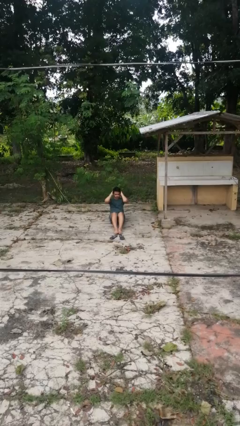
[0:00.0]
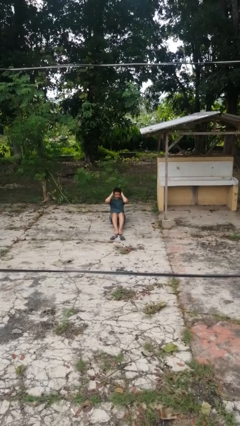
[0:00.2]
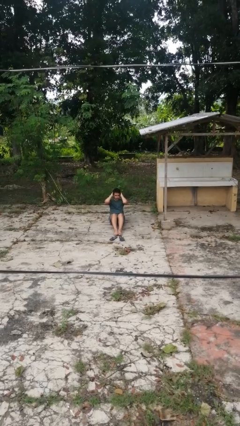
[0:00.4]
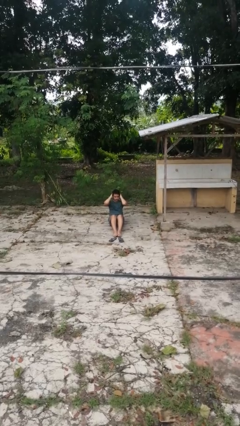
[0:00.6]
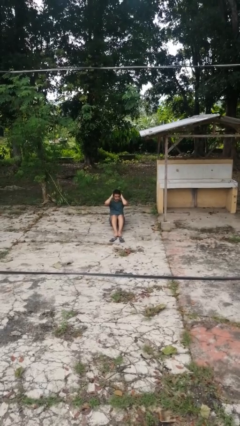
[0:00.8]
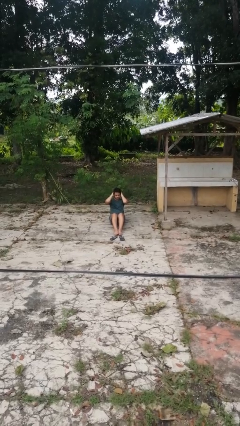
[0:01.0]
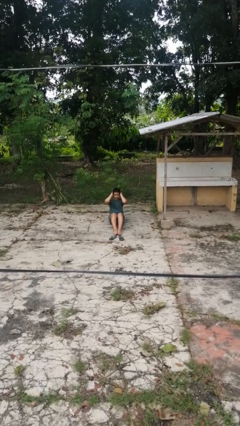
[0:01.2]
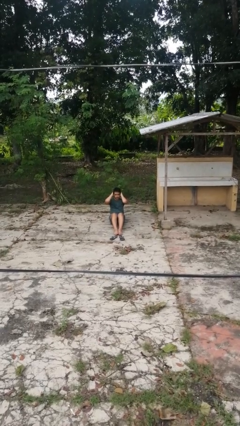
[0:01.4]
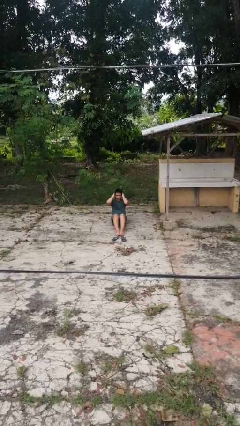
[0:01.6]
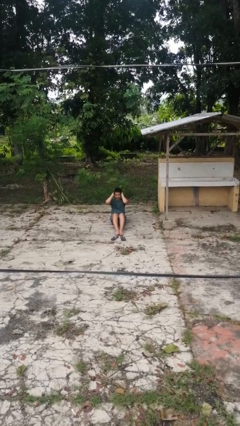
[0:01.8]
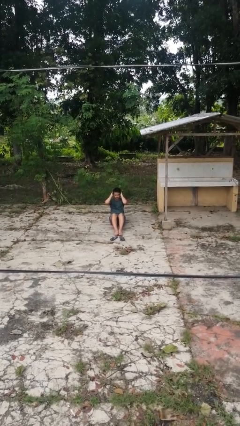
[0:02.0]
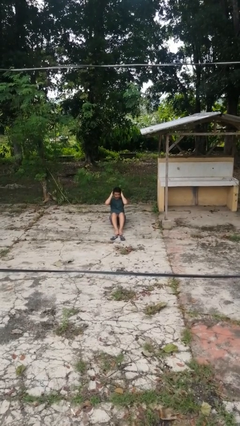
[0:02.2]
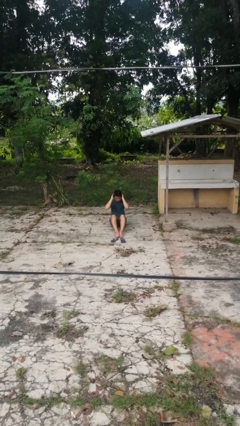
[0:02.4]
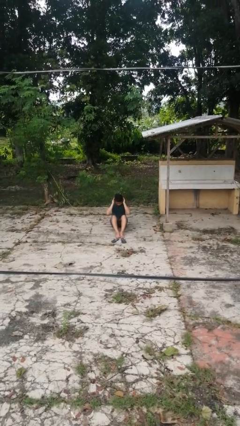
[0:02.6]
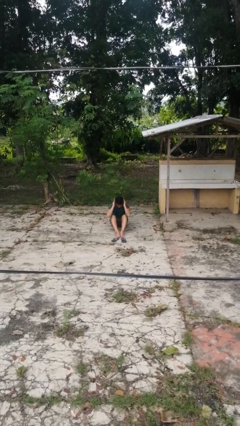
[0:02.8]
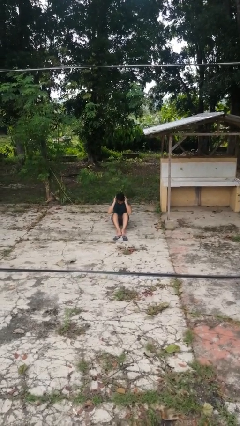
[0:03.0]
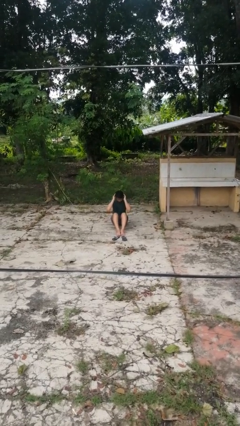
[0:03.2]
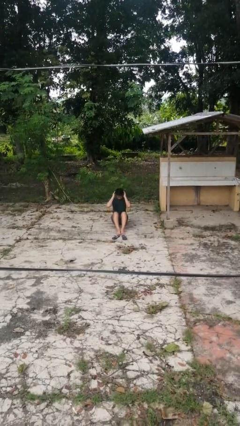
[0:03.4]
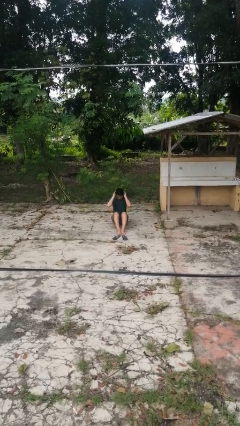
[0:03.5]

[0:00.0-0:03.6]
person exercises with situp

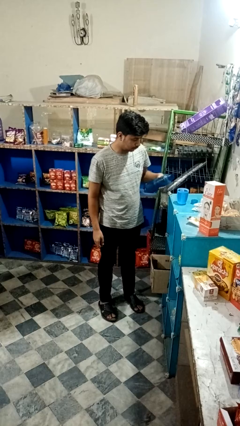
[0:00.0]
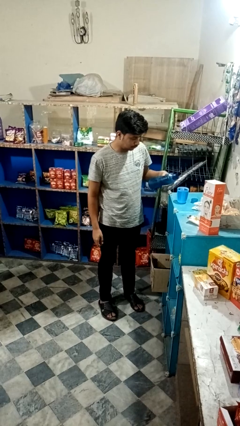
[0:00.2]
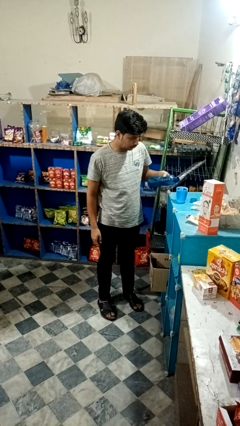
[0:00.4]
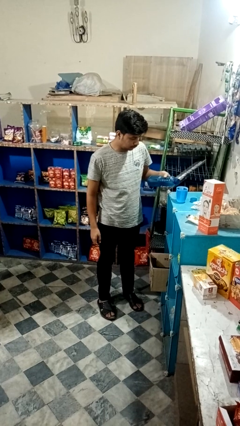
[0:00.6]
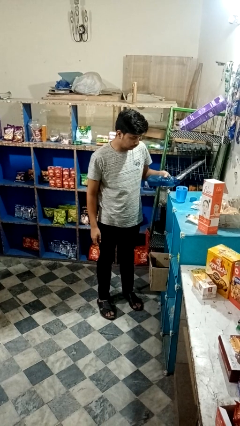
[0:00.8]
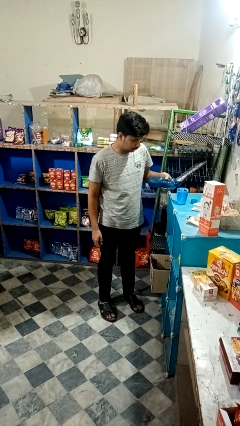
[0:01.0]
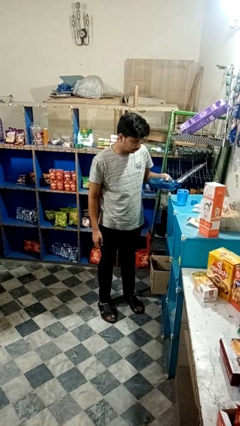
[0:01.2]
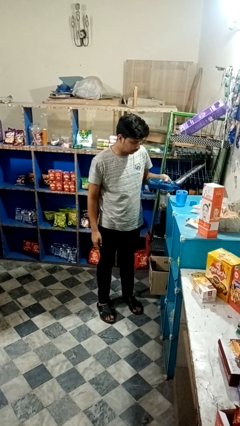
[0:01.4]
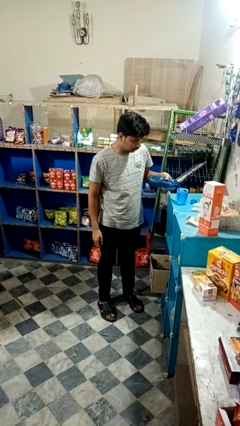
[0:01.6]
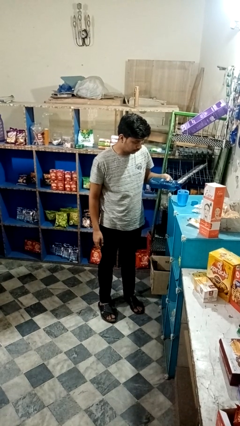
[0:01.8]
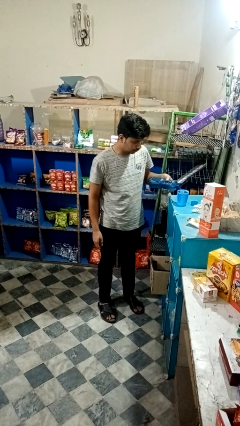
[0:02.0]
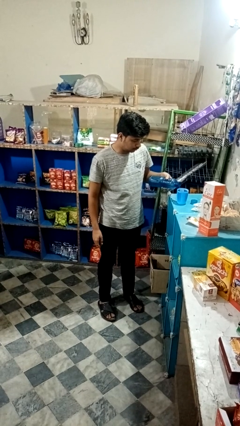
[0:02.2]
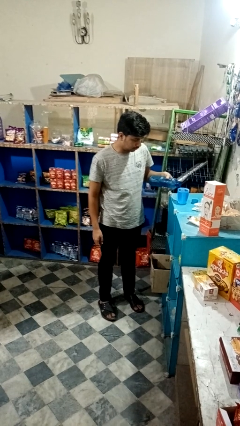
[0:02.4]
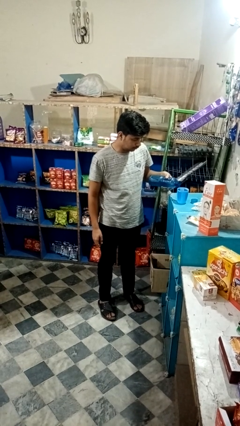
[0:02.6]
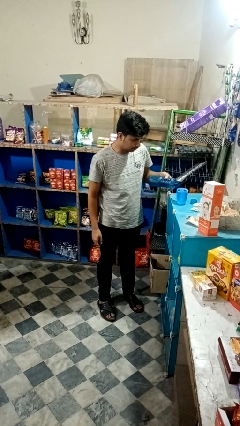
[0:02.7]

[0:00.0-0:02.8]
person pours liquid into cup

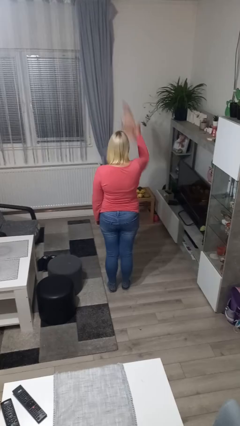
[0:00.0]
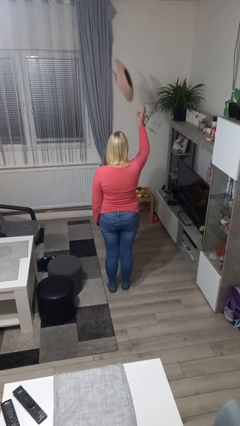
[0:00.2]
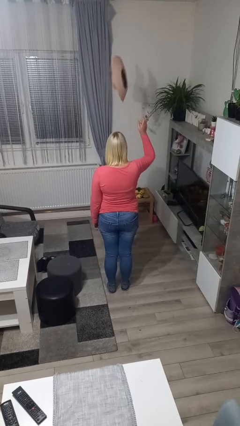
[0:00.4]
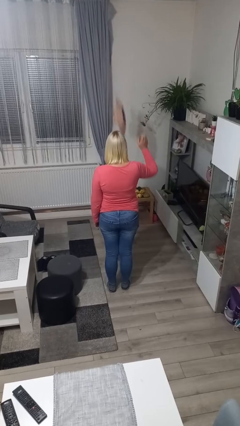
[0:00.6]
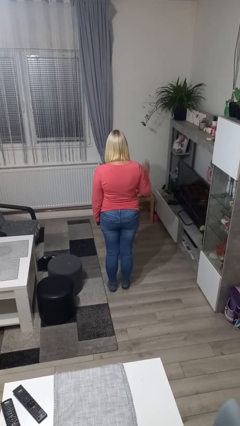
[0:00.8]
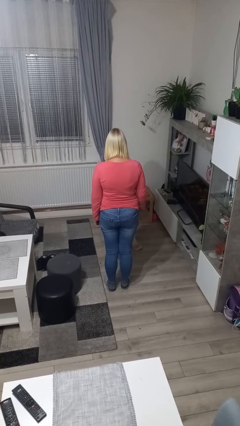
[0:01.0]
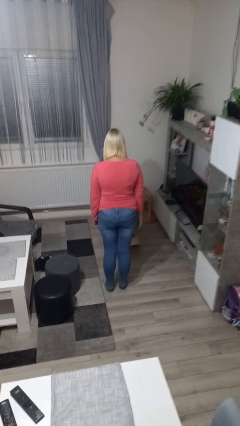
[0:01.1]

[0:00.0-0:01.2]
person throws object into air

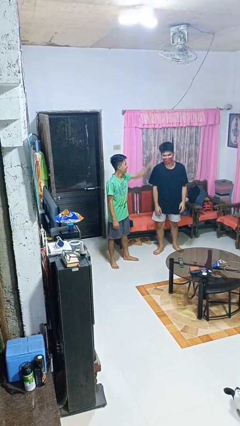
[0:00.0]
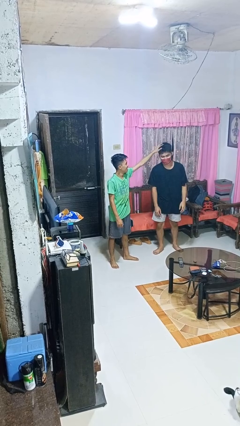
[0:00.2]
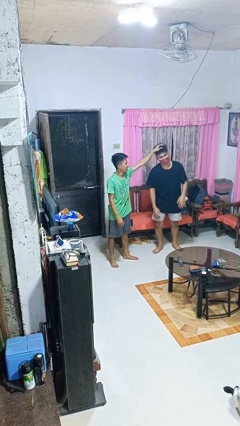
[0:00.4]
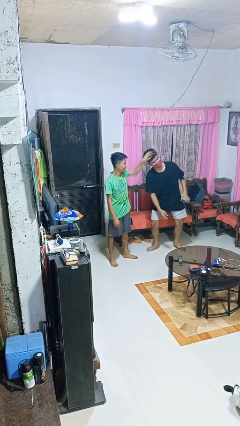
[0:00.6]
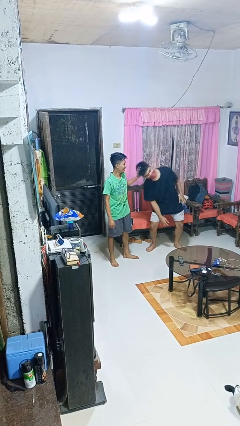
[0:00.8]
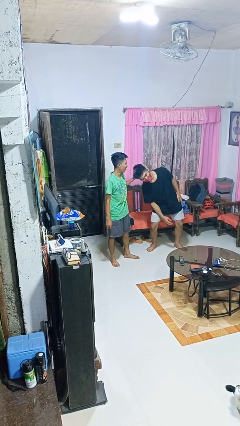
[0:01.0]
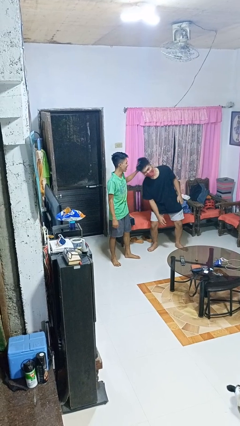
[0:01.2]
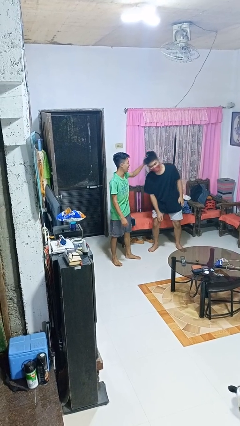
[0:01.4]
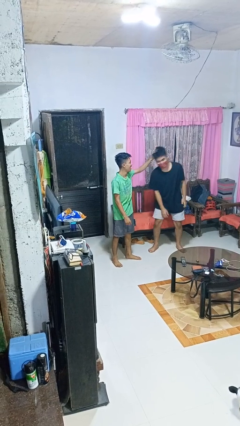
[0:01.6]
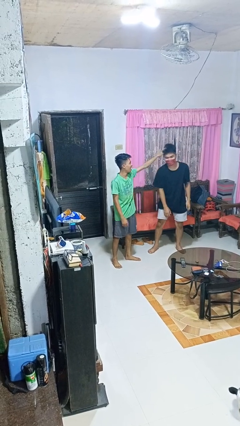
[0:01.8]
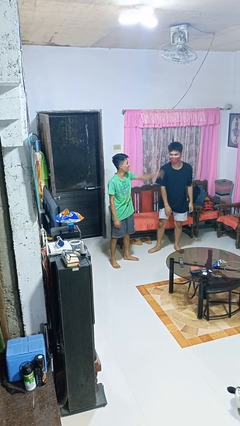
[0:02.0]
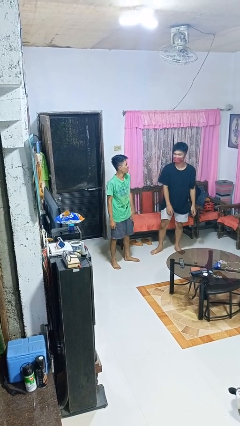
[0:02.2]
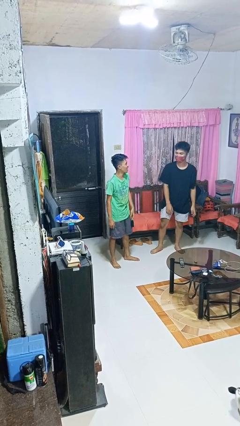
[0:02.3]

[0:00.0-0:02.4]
person grabs person by hair

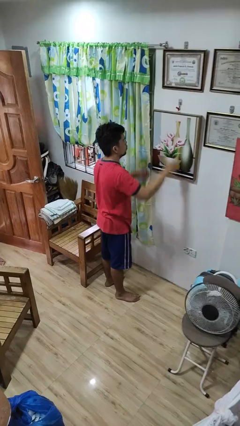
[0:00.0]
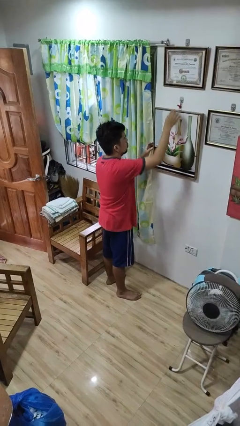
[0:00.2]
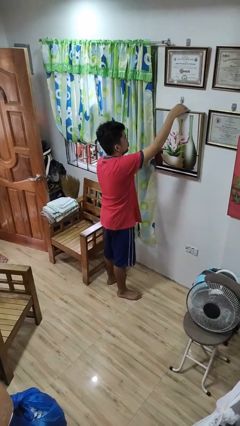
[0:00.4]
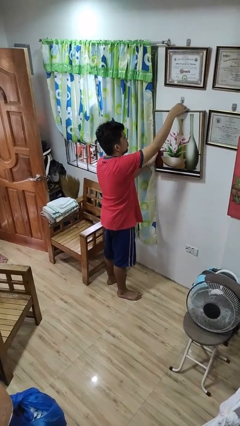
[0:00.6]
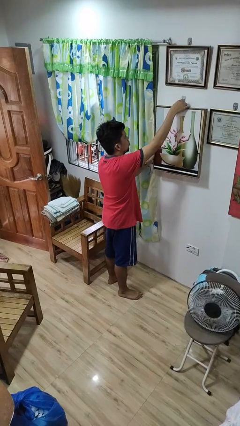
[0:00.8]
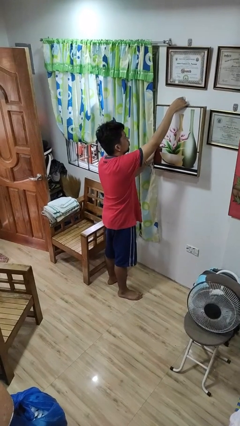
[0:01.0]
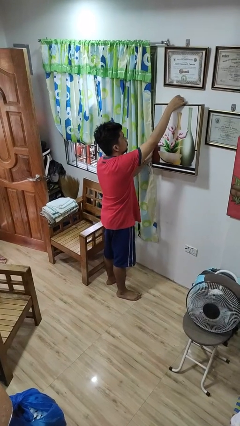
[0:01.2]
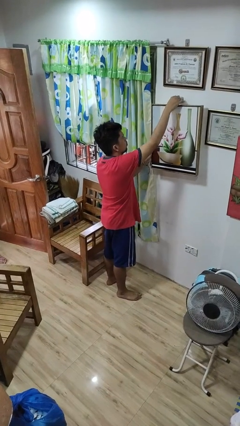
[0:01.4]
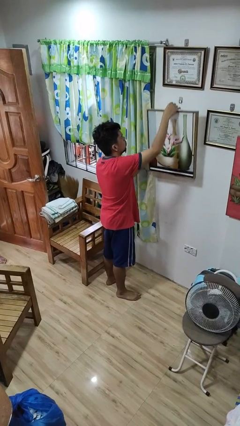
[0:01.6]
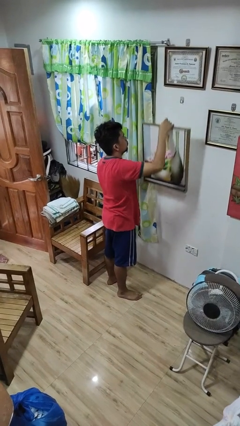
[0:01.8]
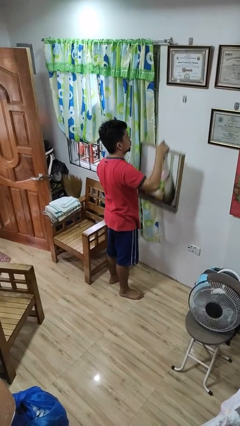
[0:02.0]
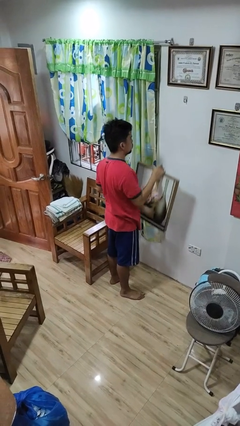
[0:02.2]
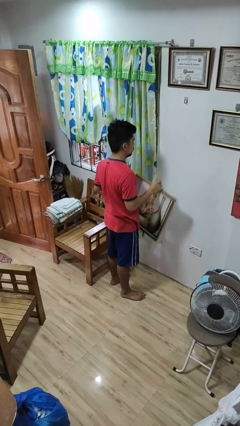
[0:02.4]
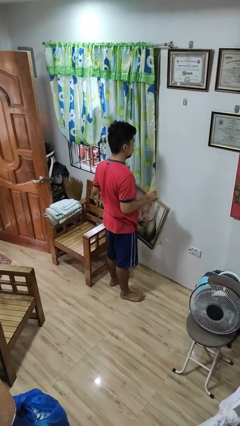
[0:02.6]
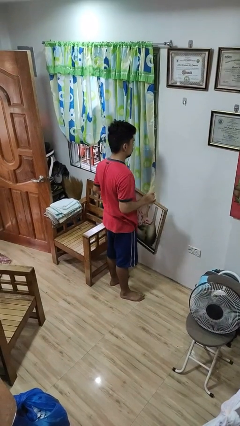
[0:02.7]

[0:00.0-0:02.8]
person takes down picture frame

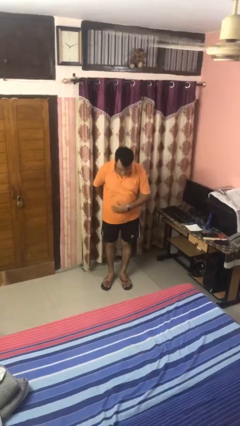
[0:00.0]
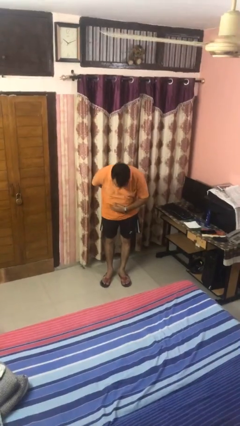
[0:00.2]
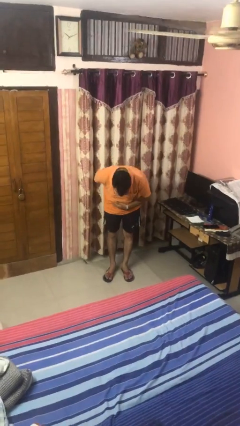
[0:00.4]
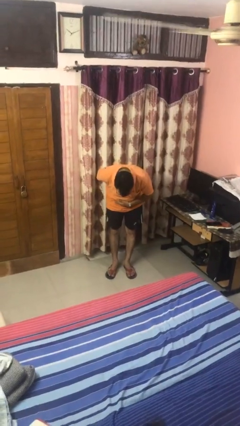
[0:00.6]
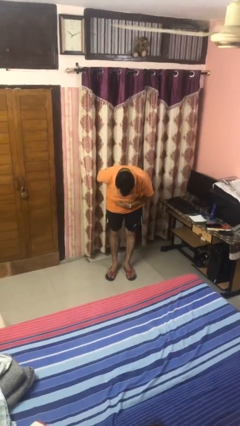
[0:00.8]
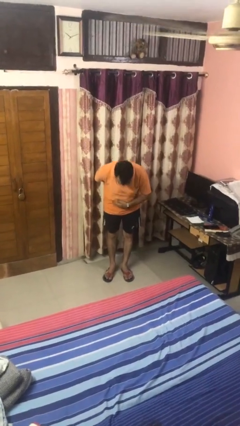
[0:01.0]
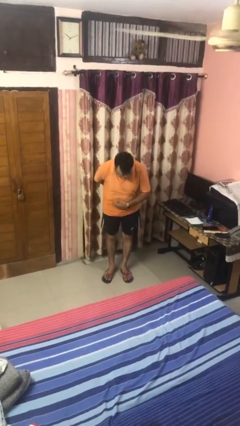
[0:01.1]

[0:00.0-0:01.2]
person bows

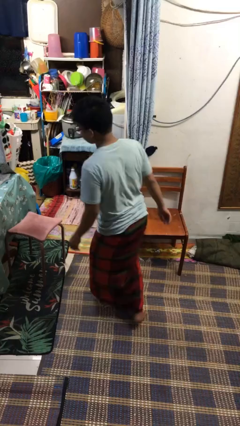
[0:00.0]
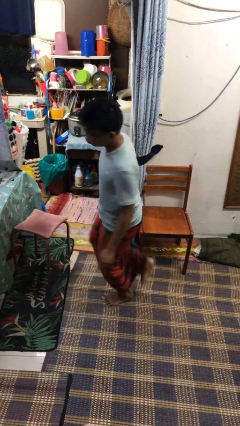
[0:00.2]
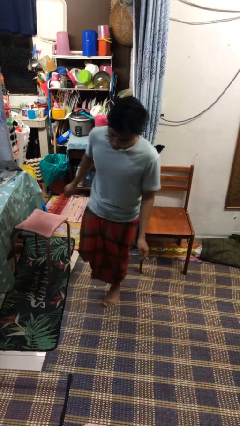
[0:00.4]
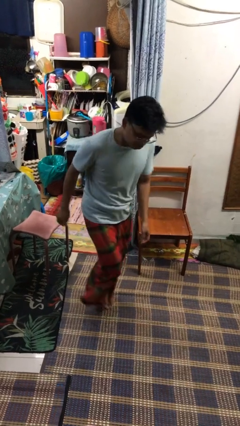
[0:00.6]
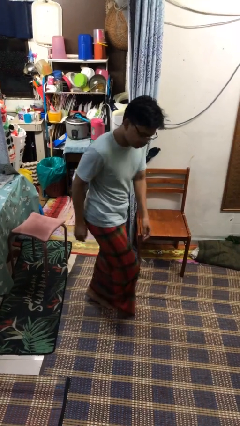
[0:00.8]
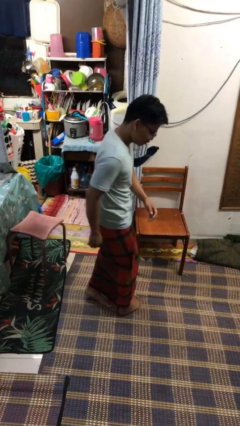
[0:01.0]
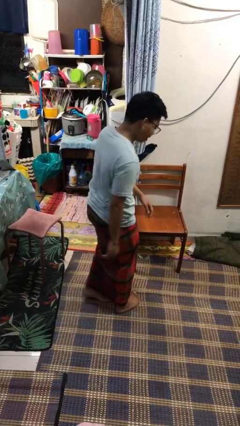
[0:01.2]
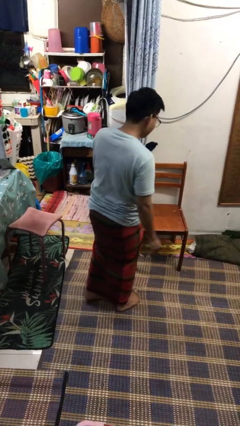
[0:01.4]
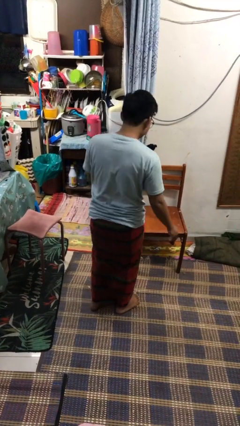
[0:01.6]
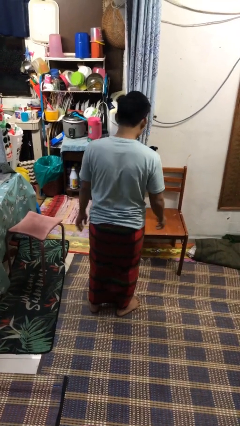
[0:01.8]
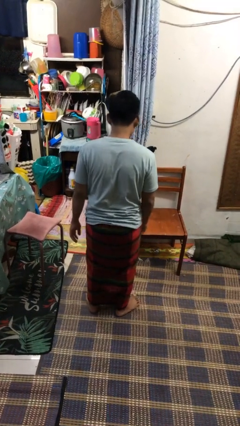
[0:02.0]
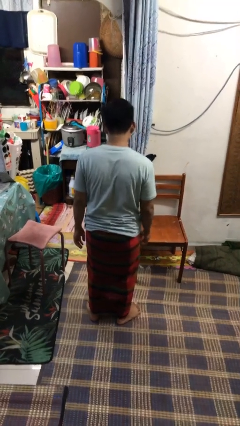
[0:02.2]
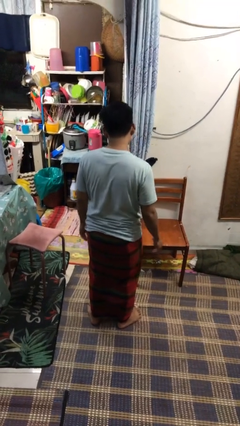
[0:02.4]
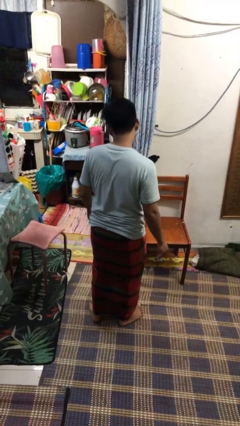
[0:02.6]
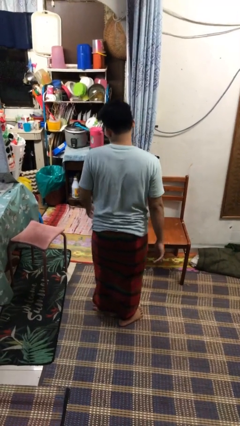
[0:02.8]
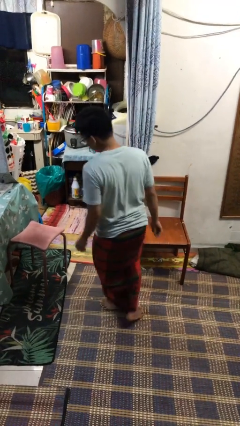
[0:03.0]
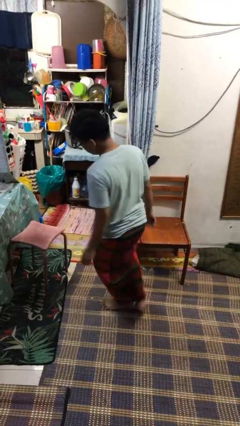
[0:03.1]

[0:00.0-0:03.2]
person twirls
